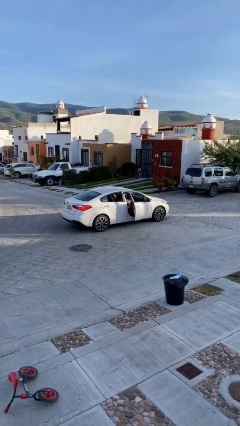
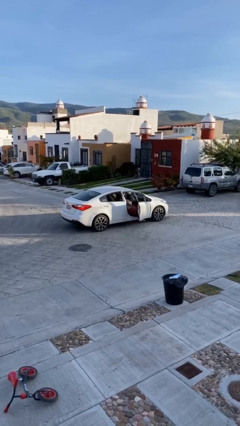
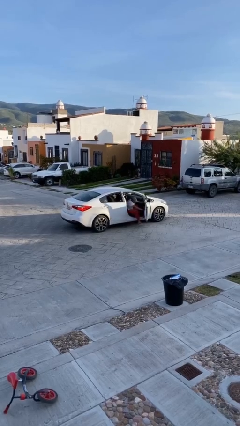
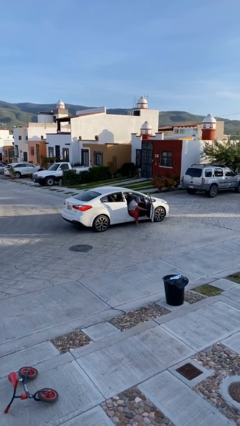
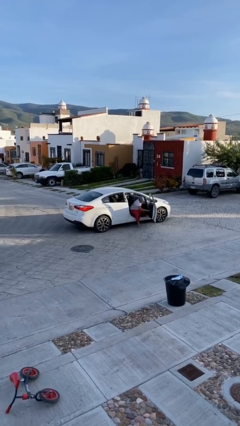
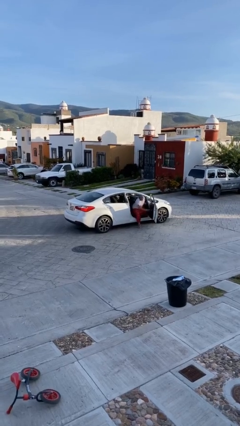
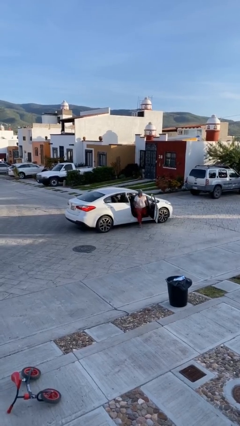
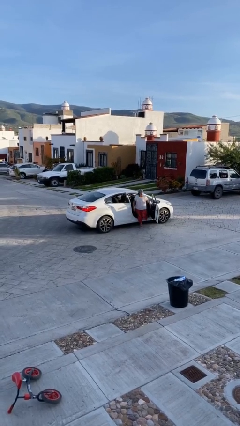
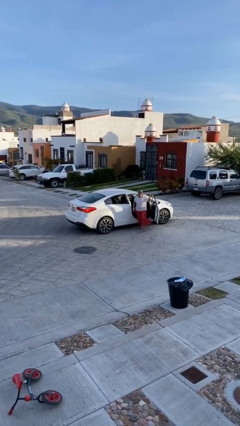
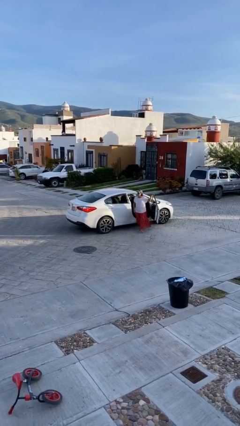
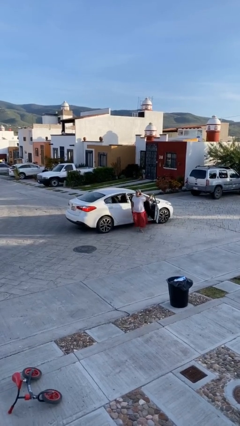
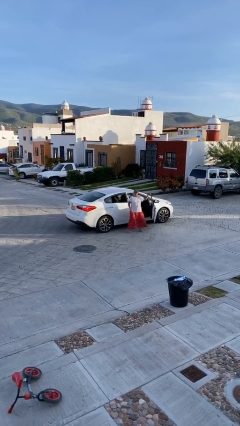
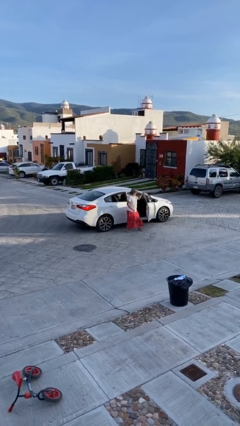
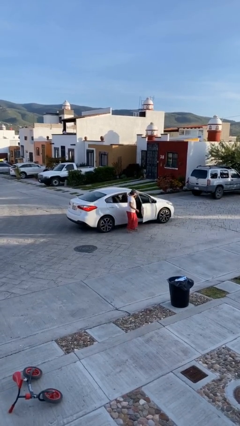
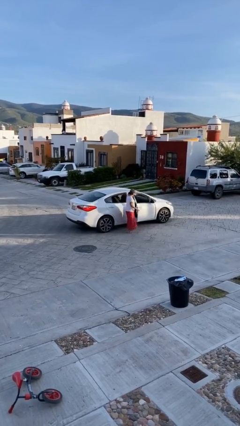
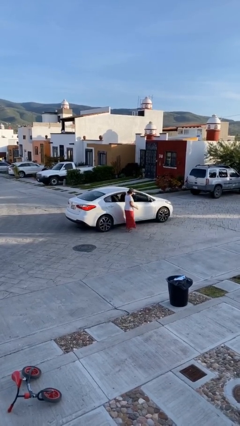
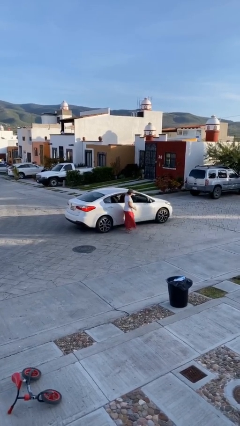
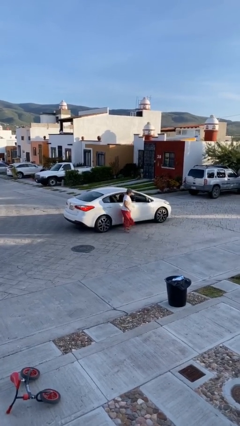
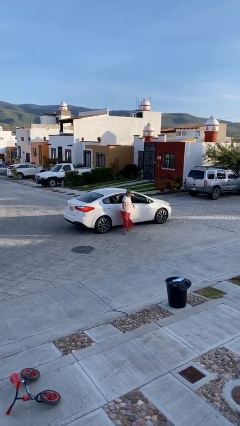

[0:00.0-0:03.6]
car drops off person

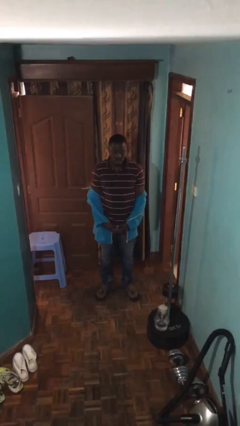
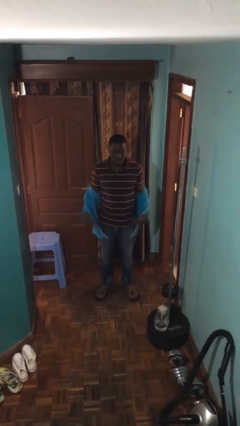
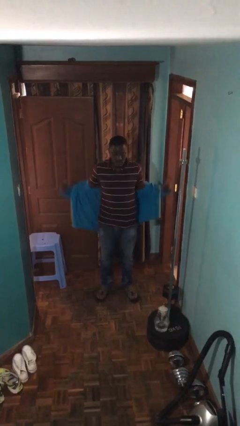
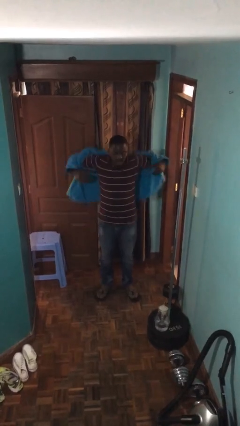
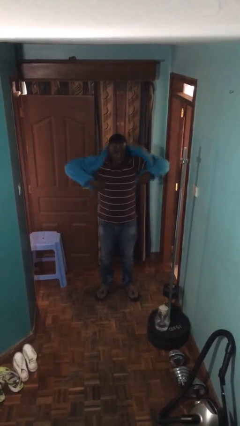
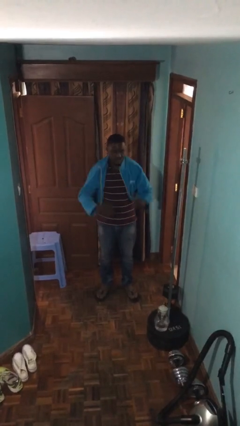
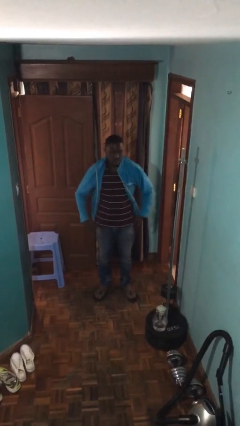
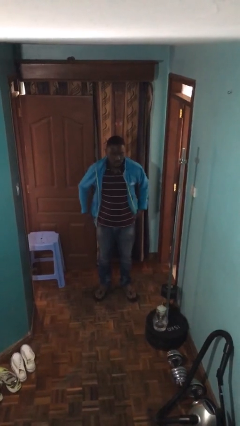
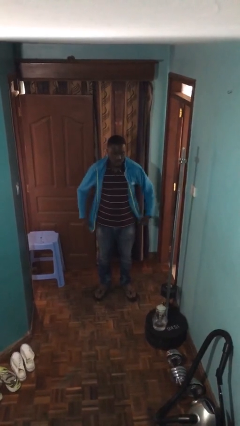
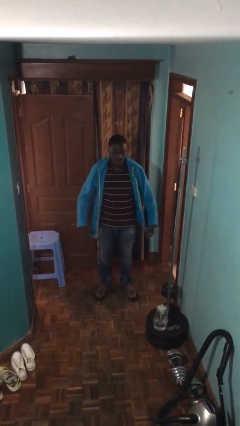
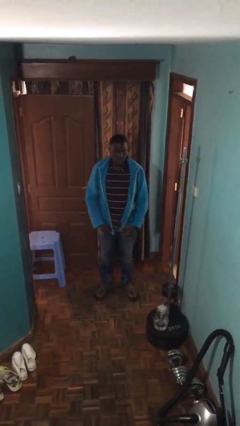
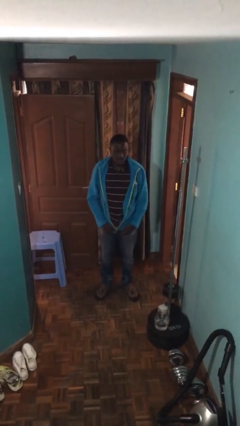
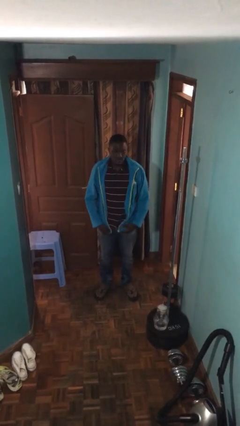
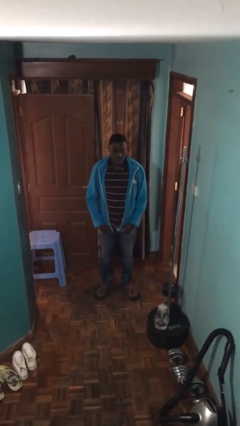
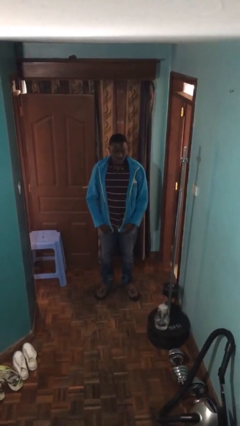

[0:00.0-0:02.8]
person puts on jacket

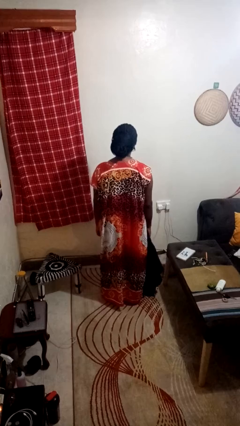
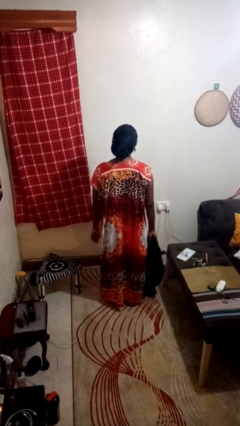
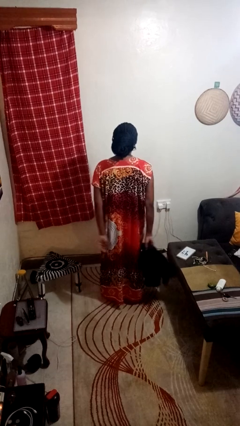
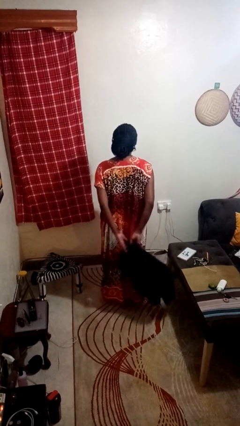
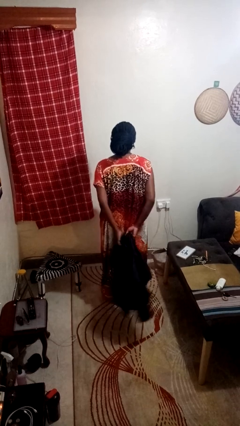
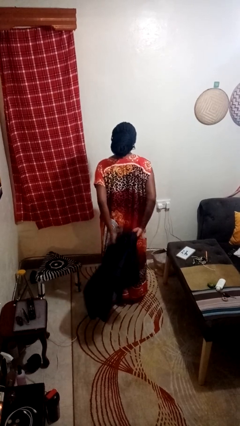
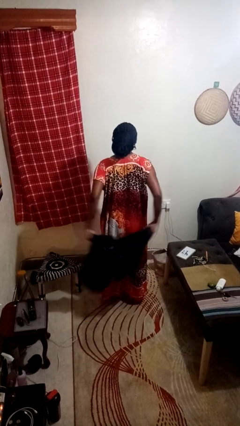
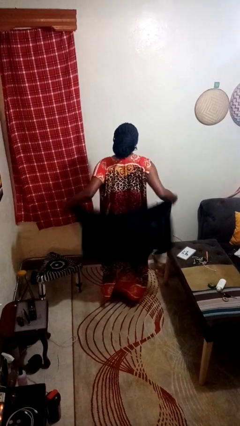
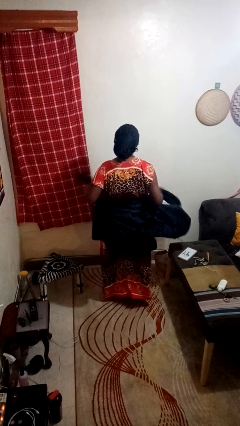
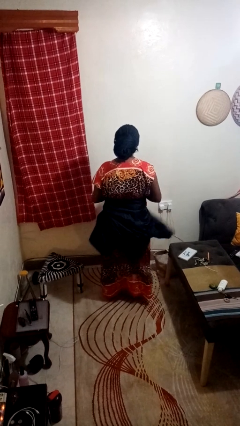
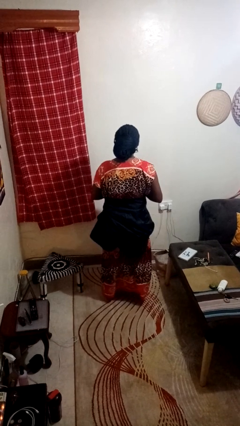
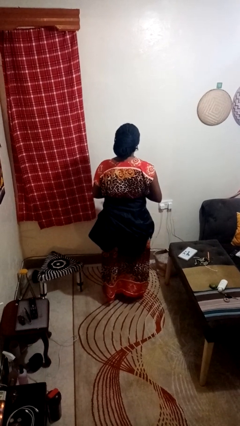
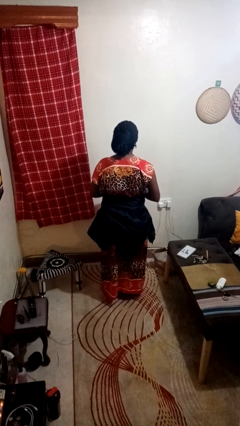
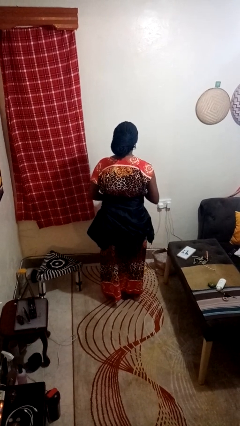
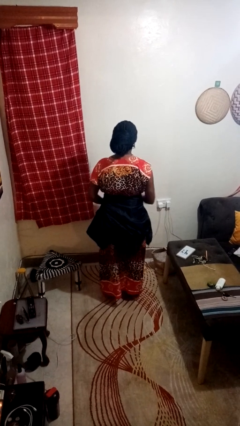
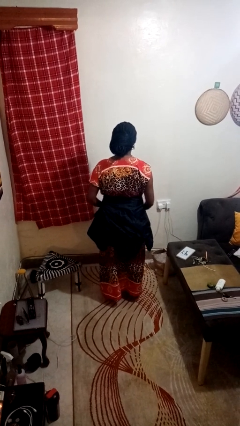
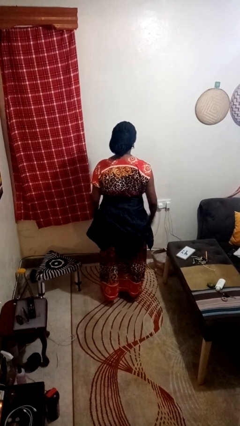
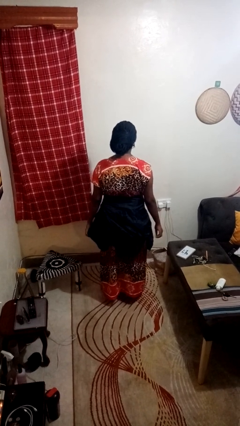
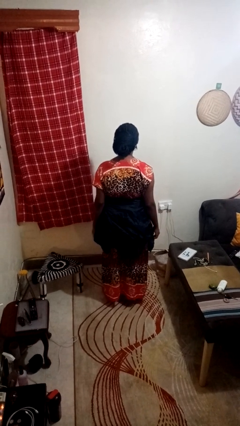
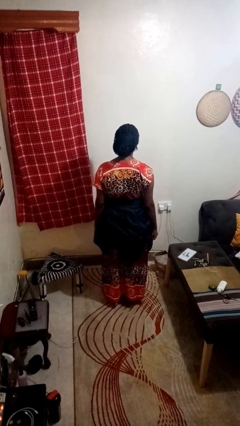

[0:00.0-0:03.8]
person ties jacket around waist

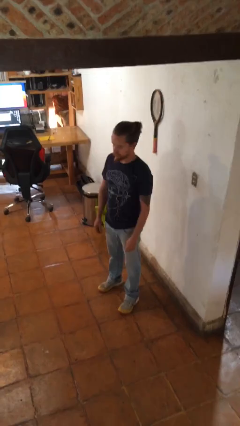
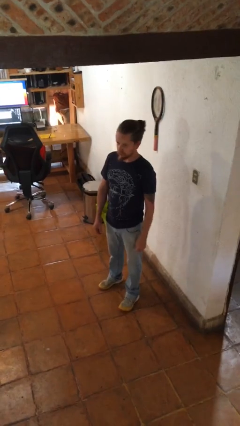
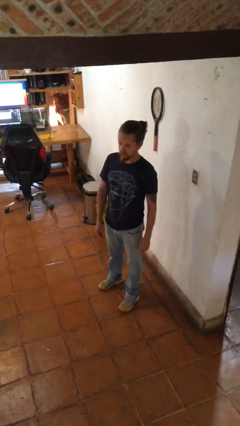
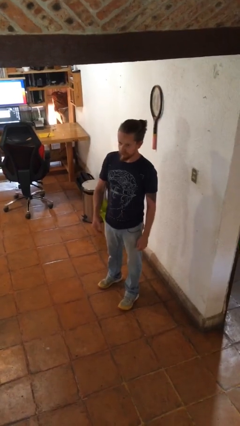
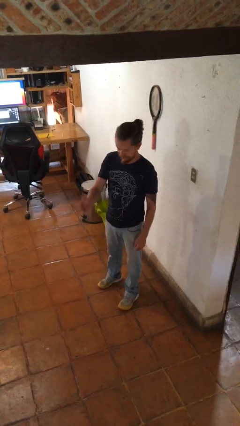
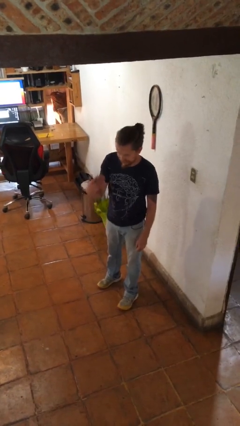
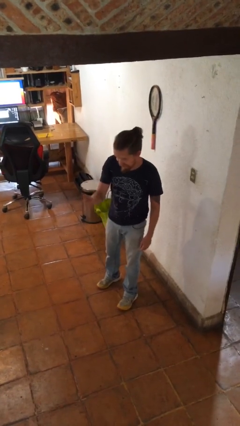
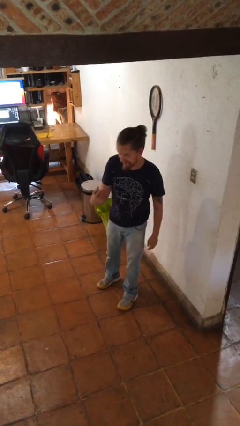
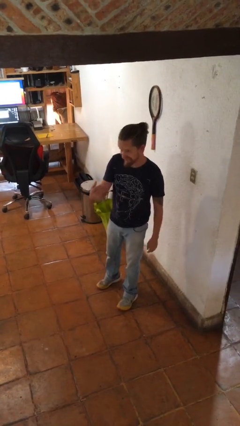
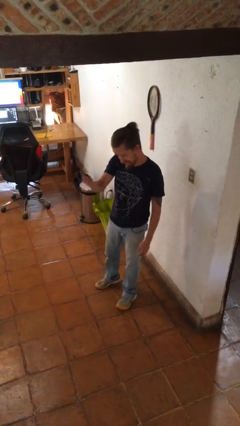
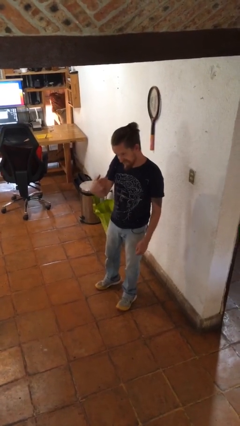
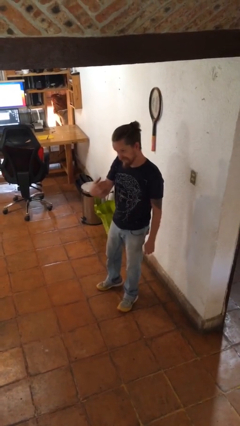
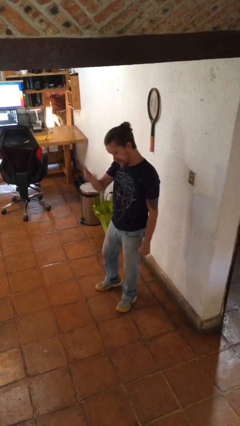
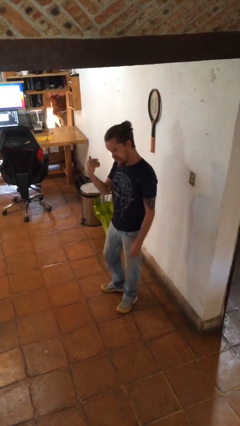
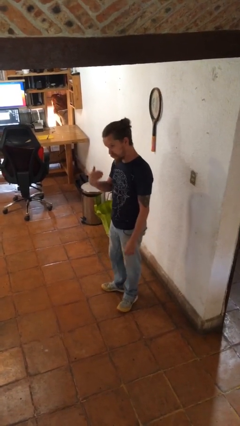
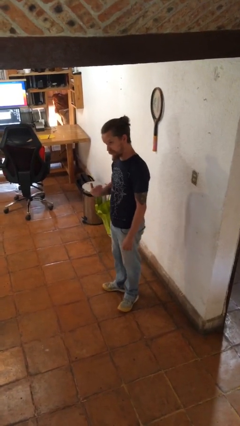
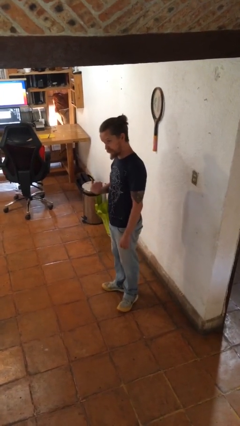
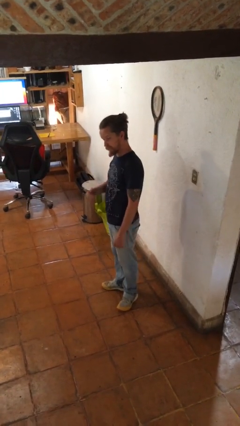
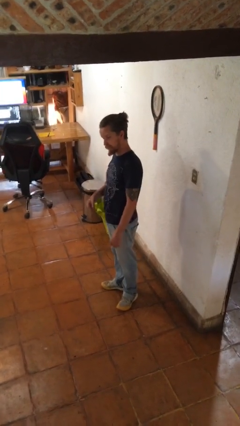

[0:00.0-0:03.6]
person gestures come here

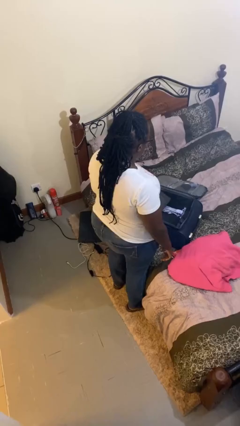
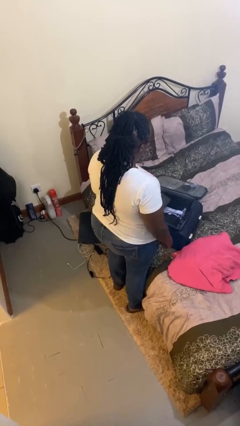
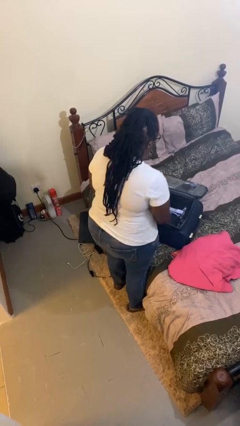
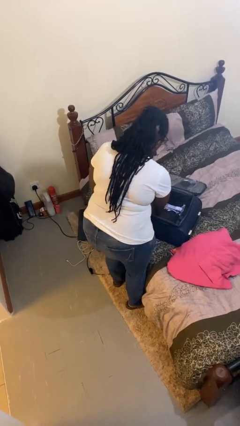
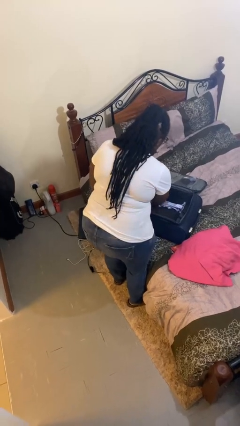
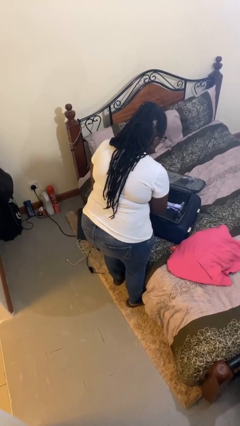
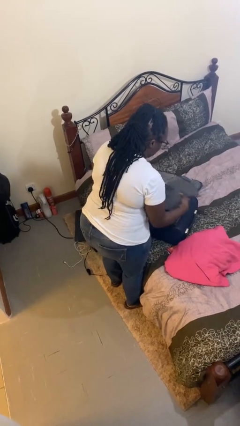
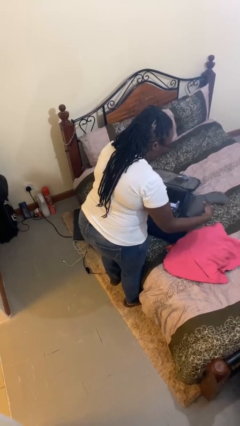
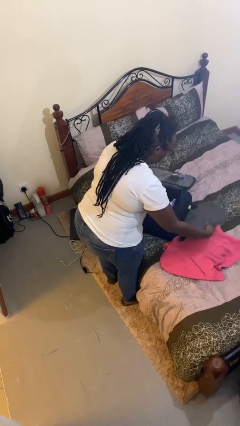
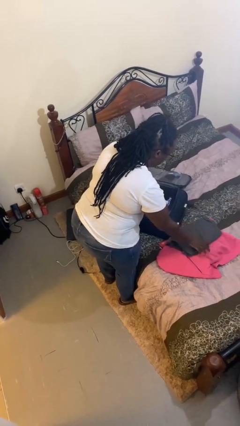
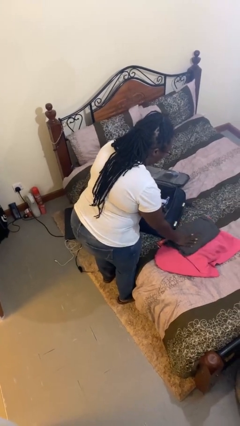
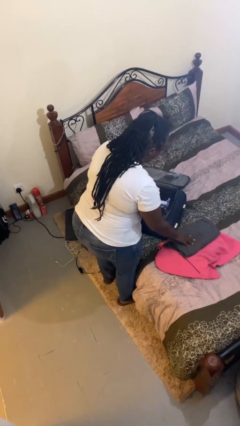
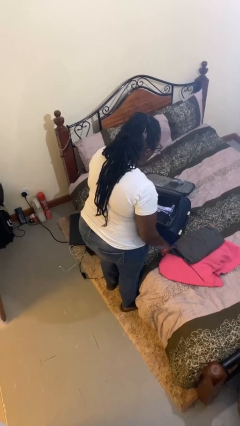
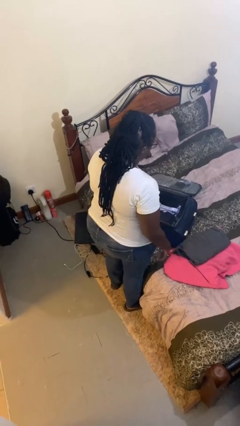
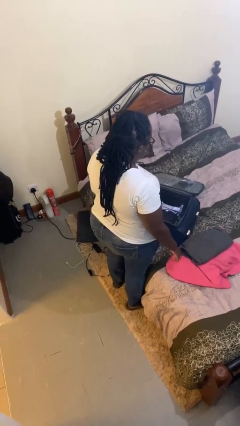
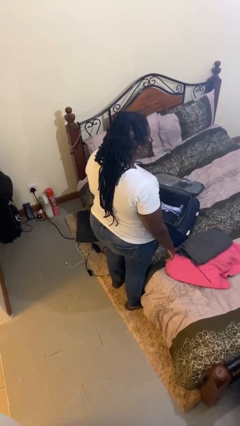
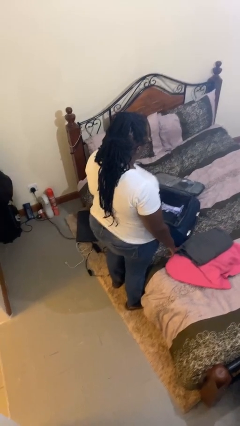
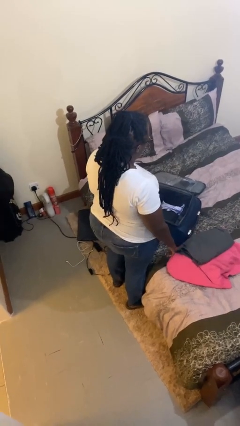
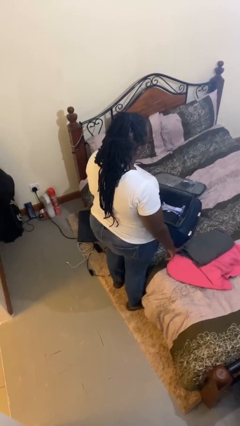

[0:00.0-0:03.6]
person unloads clothes from suitcase

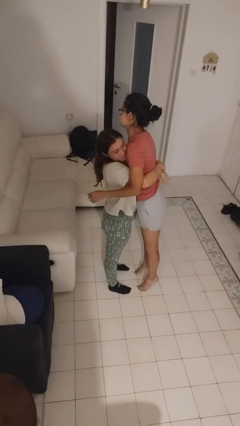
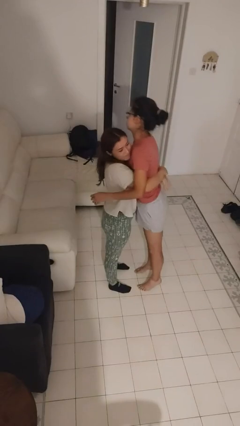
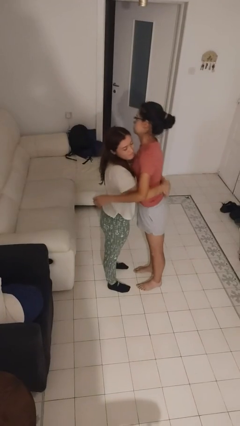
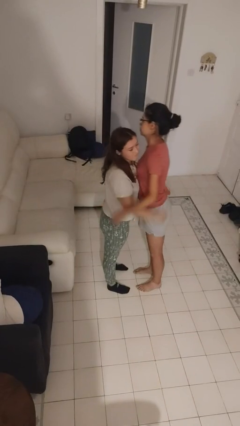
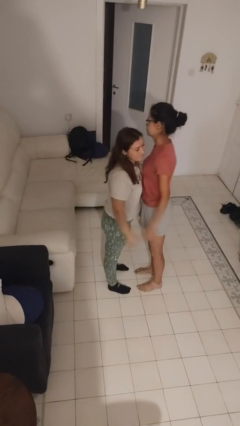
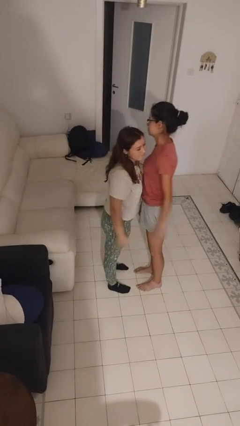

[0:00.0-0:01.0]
person puts down person
